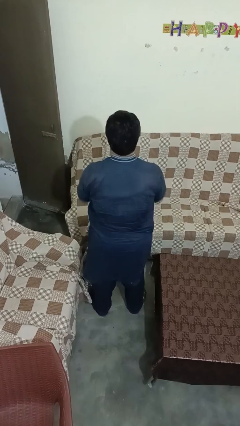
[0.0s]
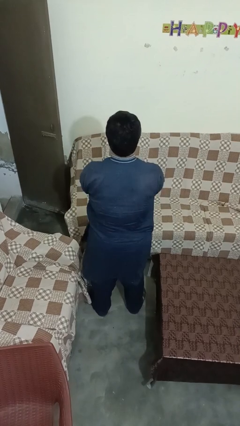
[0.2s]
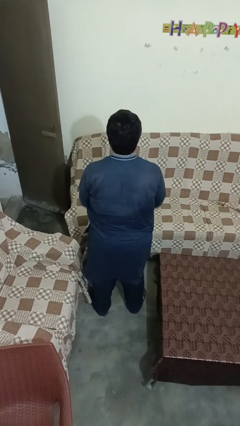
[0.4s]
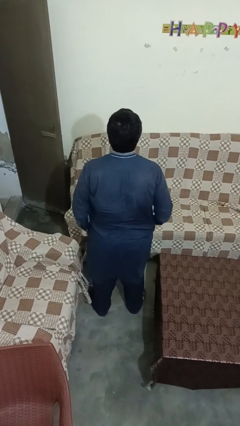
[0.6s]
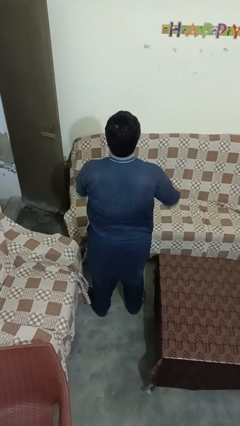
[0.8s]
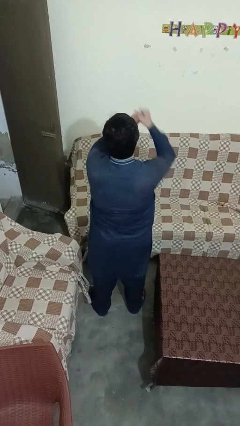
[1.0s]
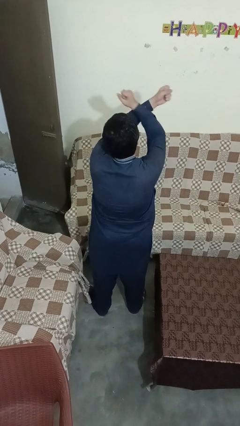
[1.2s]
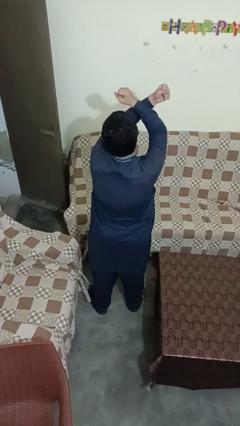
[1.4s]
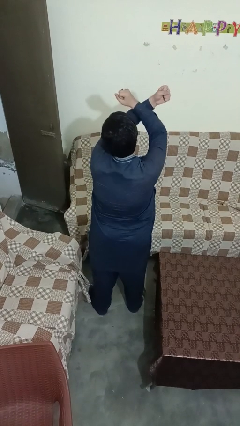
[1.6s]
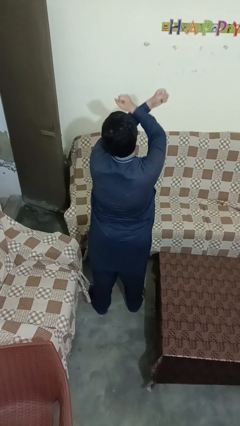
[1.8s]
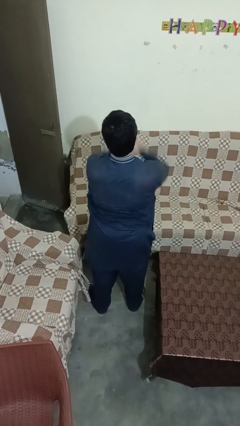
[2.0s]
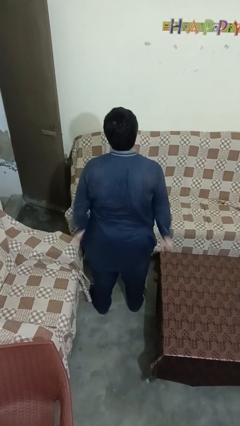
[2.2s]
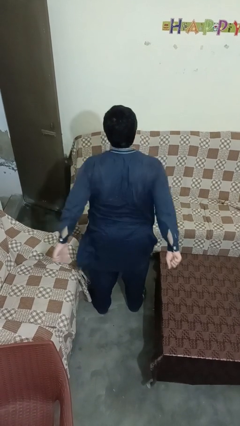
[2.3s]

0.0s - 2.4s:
person gestures arms x

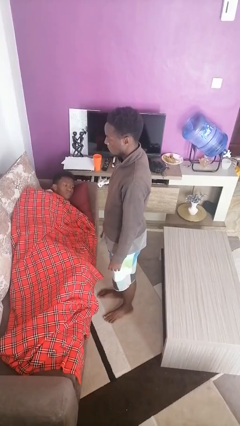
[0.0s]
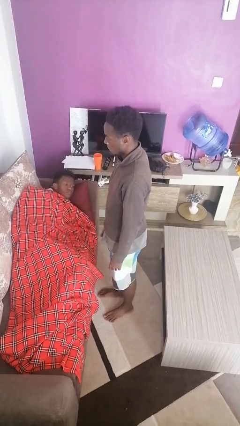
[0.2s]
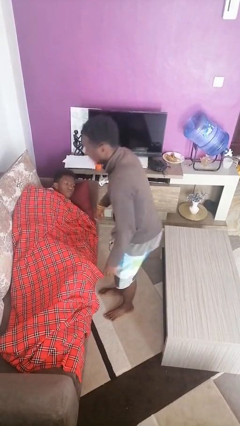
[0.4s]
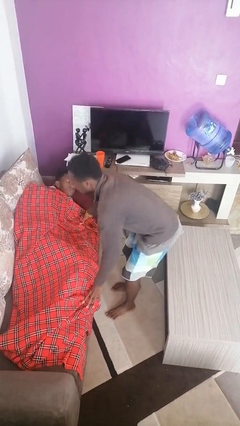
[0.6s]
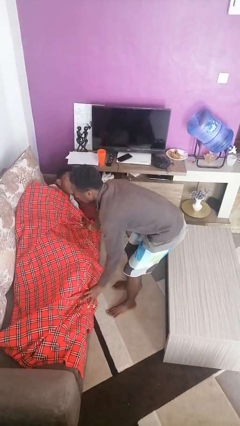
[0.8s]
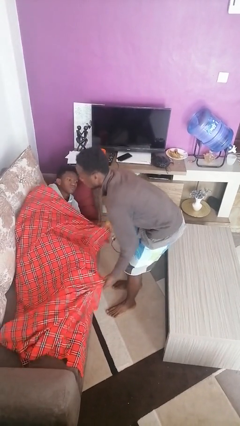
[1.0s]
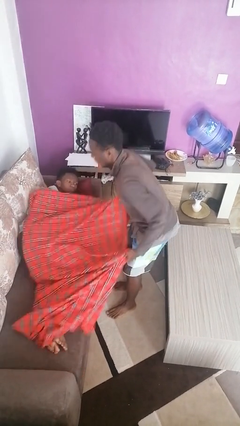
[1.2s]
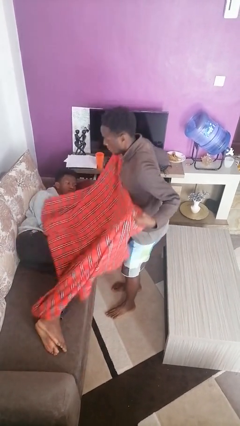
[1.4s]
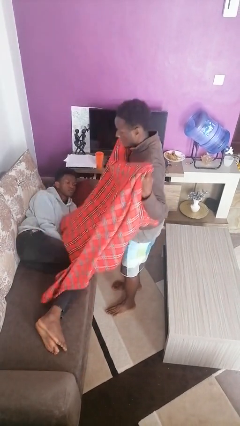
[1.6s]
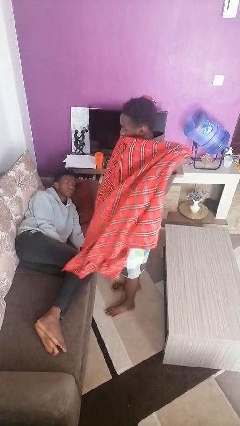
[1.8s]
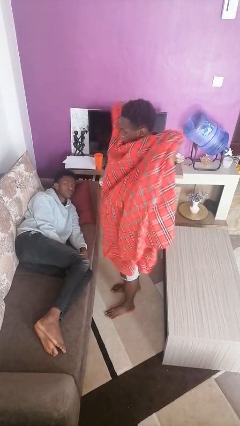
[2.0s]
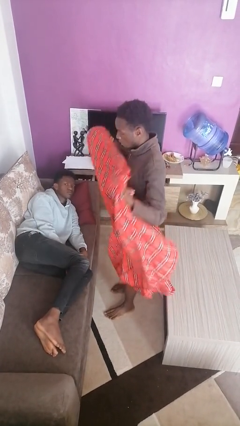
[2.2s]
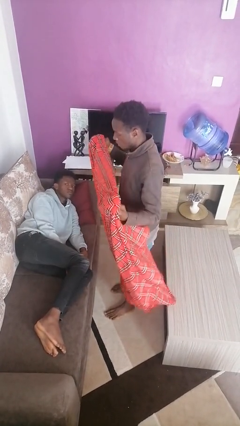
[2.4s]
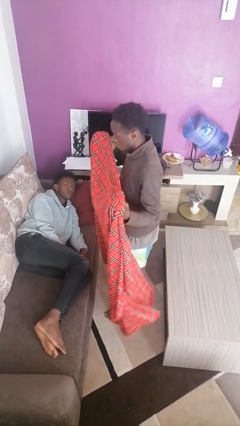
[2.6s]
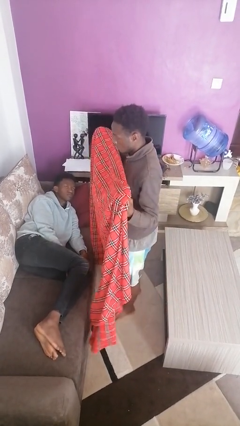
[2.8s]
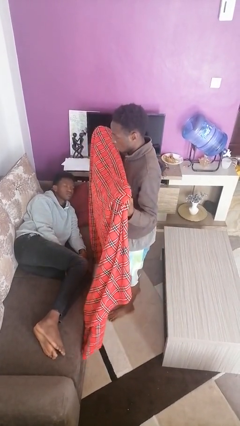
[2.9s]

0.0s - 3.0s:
person uncovers friend with blanket

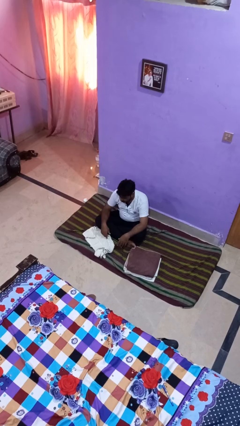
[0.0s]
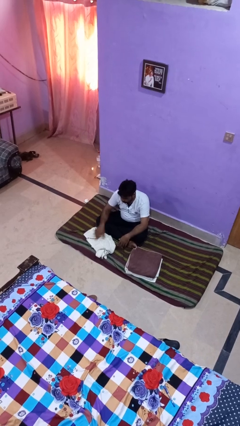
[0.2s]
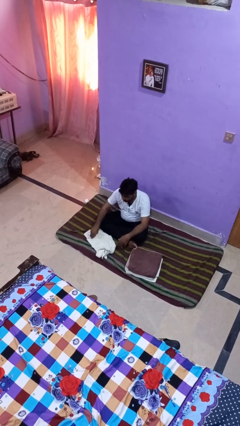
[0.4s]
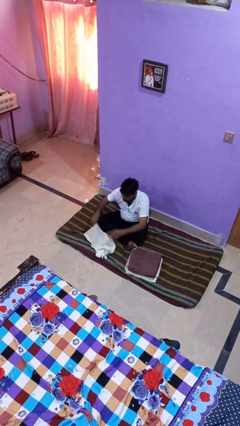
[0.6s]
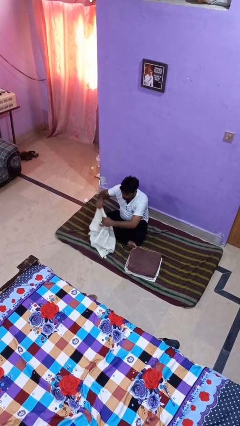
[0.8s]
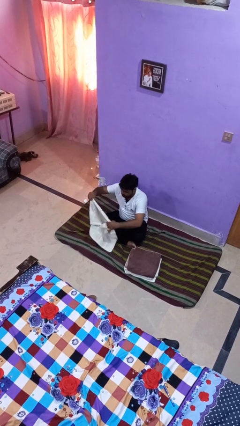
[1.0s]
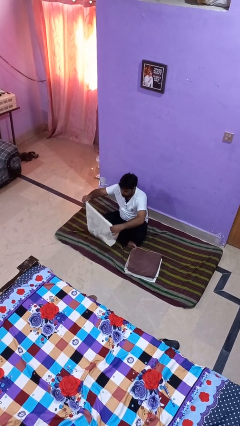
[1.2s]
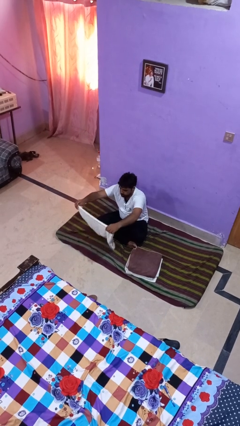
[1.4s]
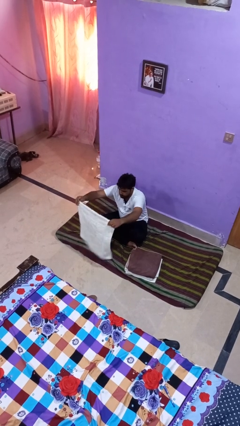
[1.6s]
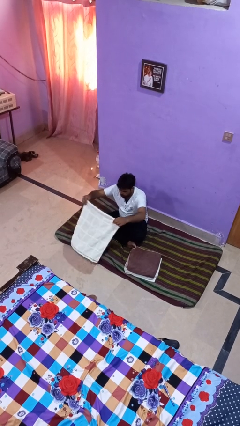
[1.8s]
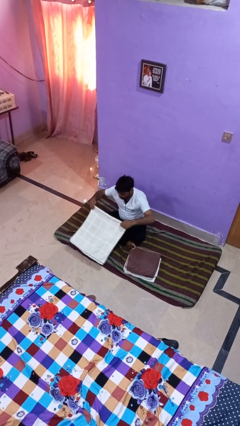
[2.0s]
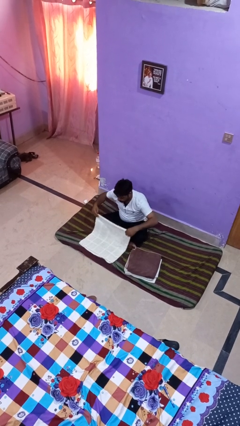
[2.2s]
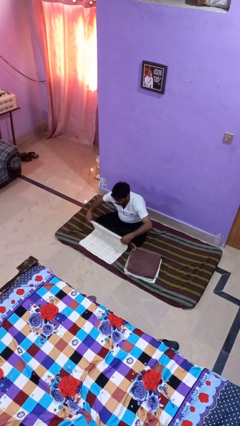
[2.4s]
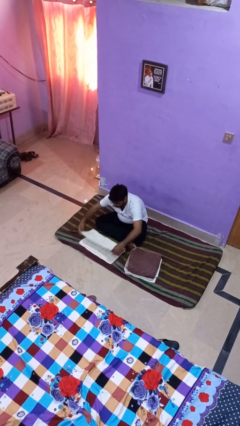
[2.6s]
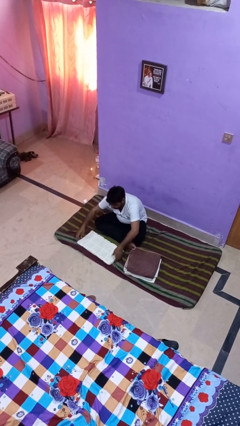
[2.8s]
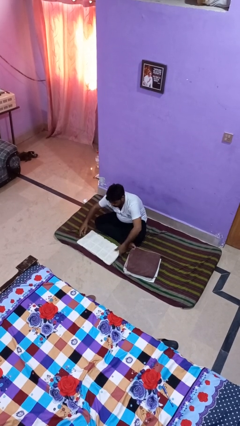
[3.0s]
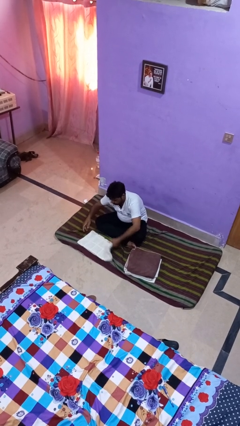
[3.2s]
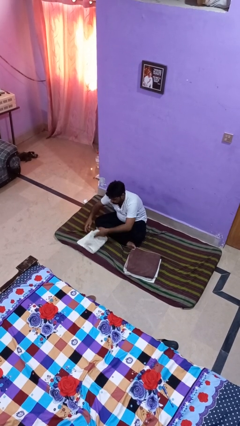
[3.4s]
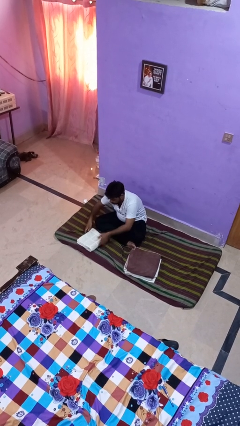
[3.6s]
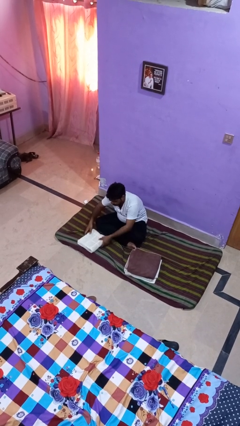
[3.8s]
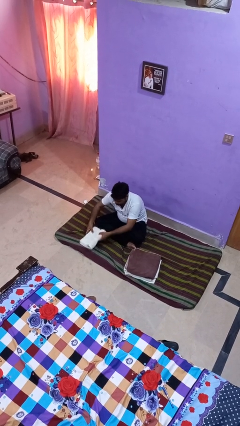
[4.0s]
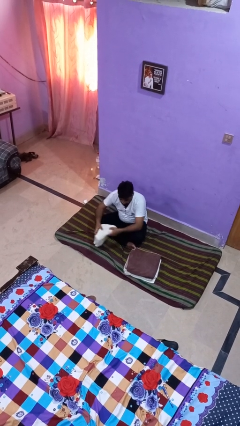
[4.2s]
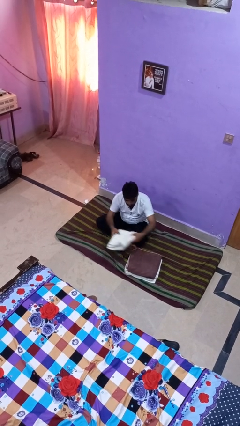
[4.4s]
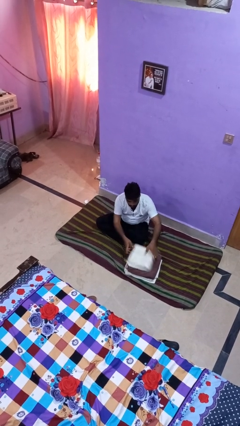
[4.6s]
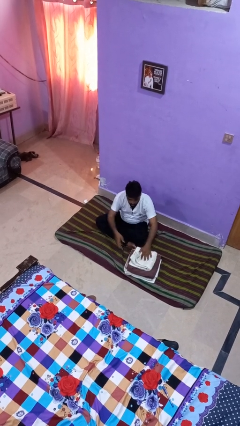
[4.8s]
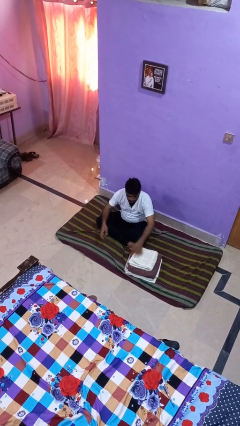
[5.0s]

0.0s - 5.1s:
person folds towel

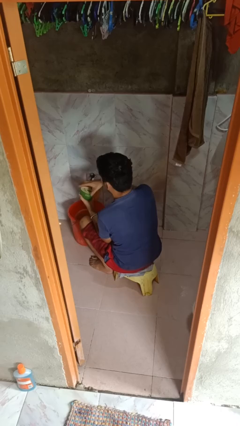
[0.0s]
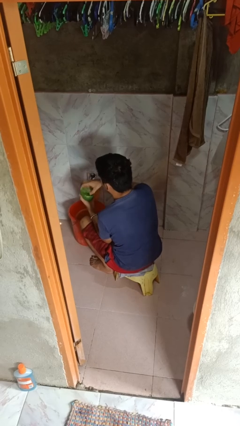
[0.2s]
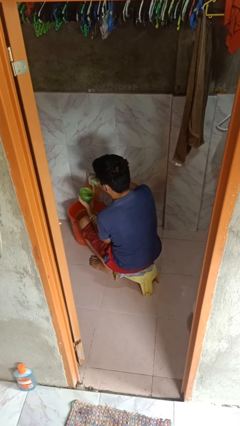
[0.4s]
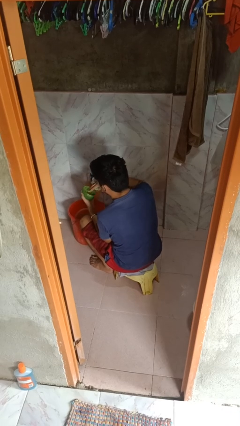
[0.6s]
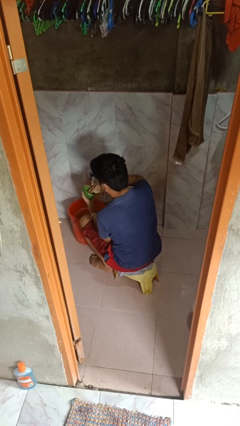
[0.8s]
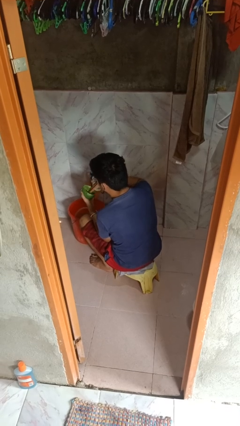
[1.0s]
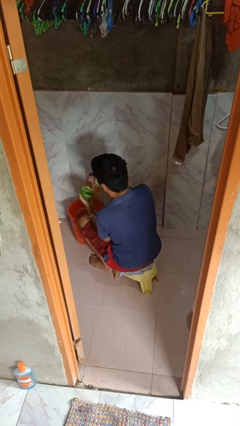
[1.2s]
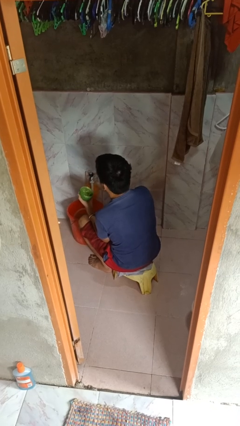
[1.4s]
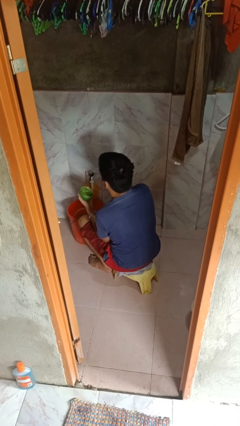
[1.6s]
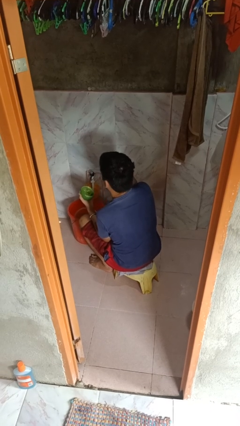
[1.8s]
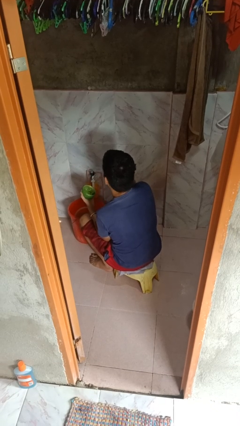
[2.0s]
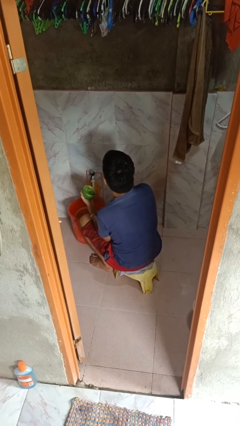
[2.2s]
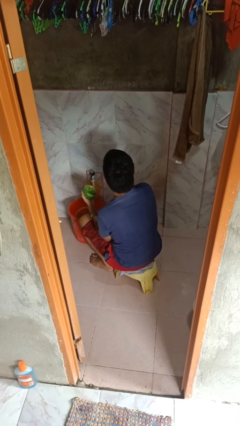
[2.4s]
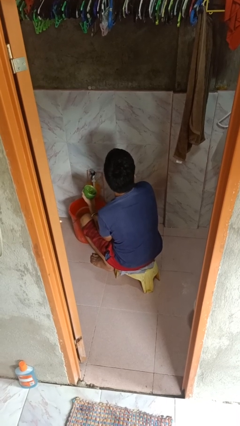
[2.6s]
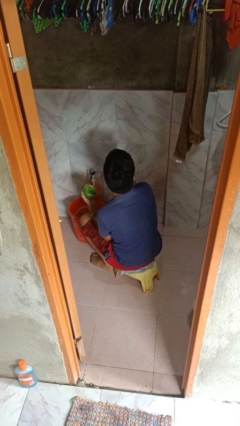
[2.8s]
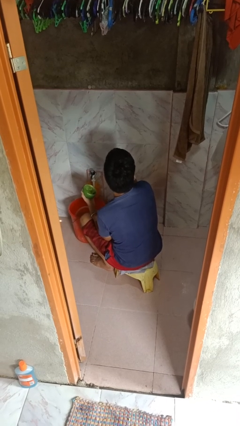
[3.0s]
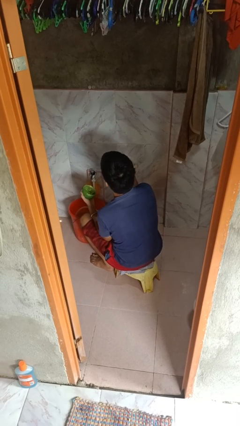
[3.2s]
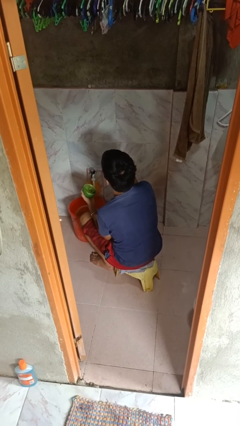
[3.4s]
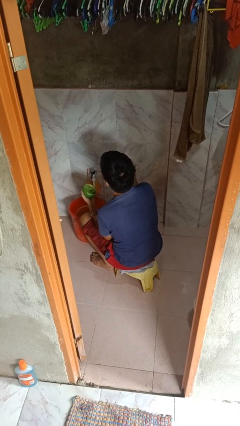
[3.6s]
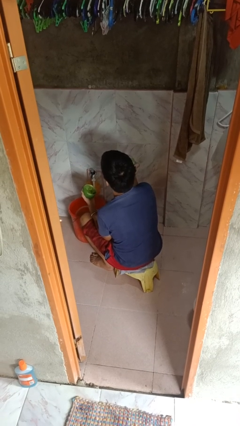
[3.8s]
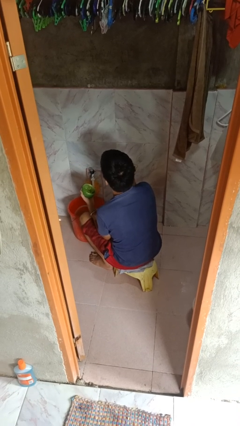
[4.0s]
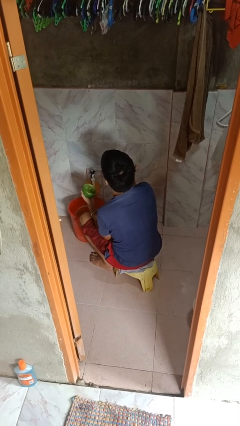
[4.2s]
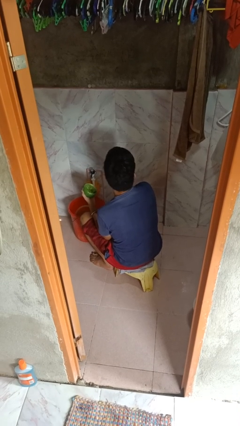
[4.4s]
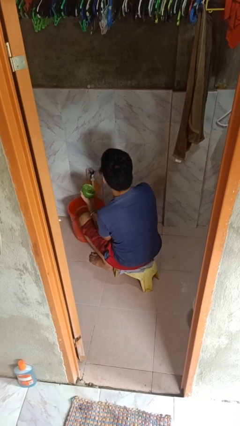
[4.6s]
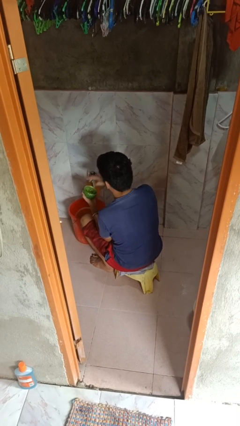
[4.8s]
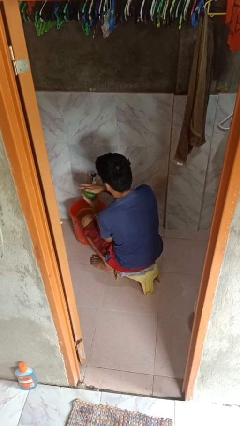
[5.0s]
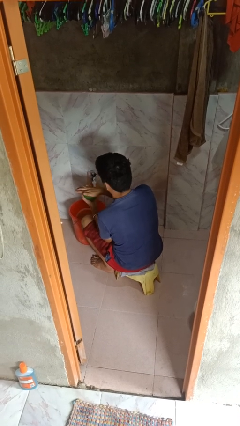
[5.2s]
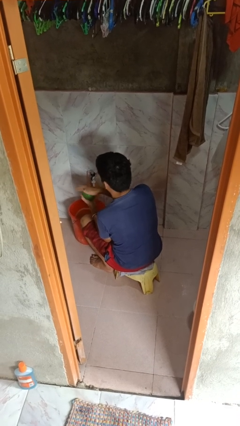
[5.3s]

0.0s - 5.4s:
person applies facial moisturizer

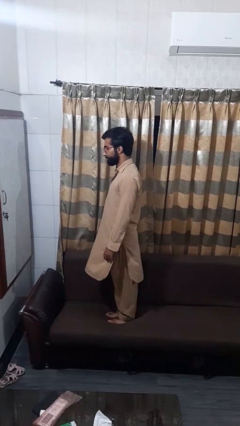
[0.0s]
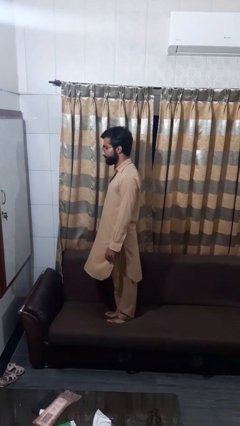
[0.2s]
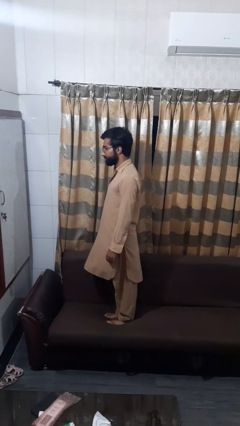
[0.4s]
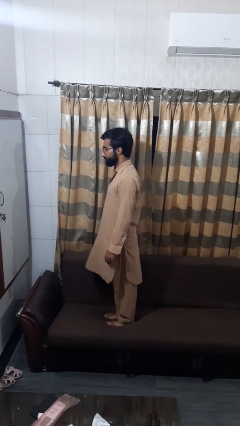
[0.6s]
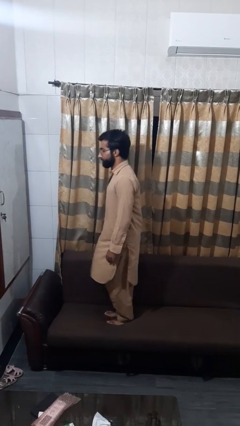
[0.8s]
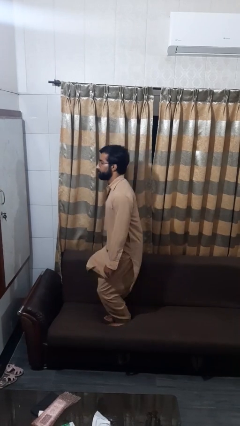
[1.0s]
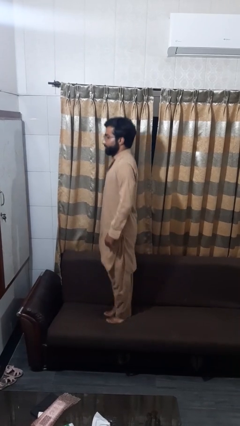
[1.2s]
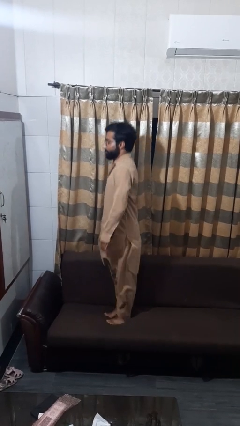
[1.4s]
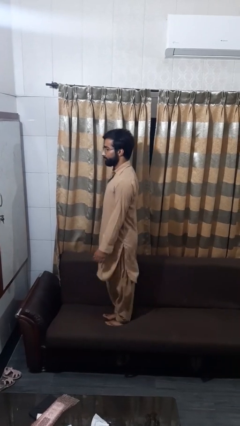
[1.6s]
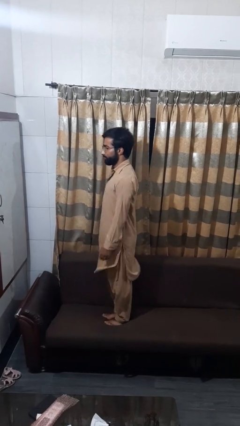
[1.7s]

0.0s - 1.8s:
person jumps on couch
